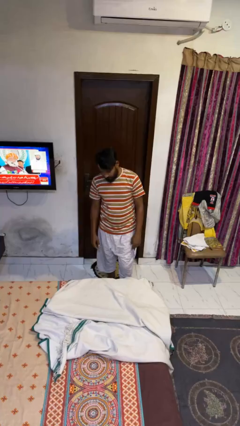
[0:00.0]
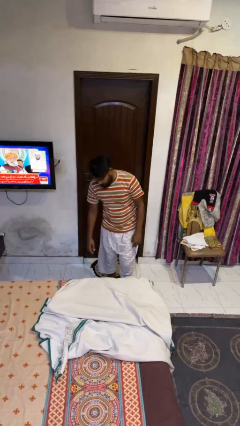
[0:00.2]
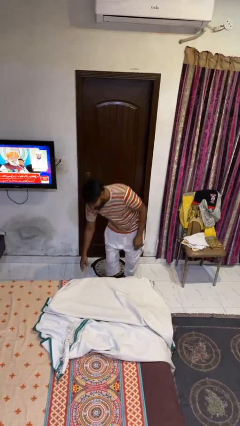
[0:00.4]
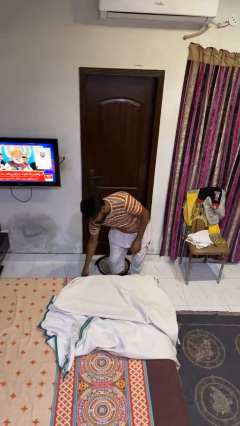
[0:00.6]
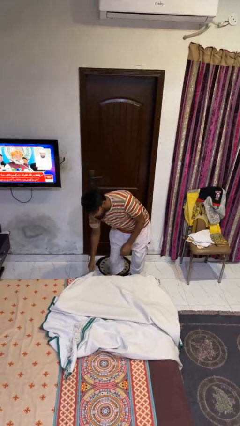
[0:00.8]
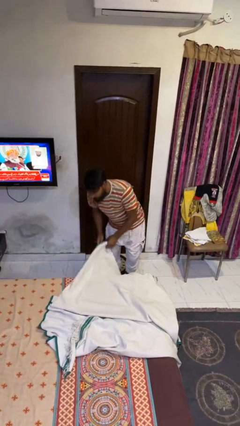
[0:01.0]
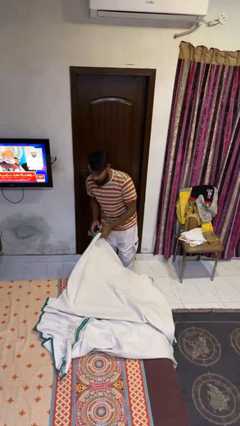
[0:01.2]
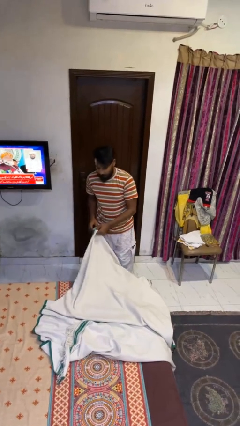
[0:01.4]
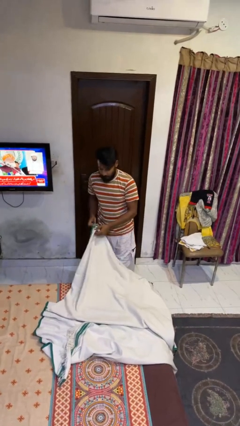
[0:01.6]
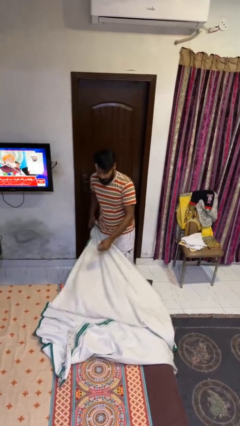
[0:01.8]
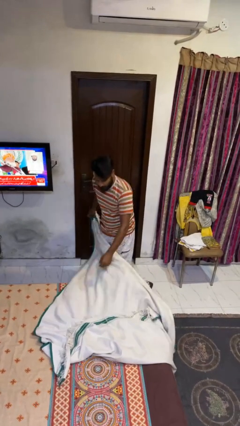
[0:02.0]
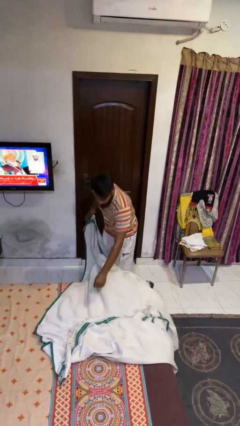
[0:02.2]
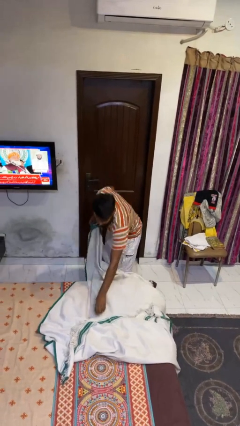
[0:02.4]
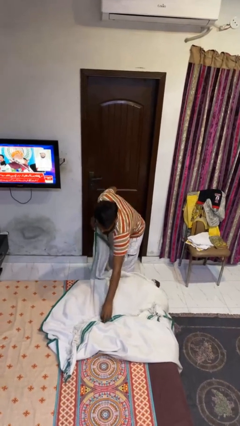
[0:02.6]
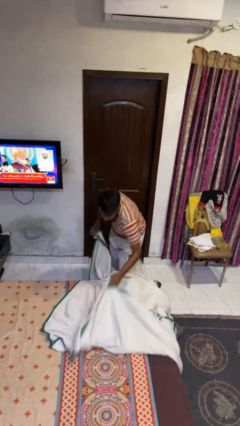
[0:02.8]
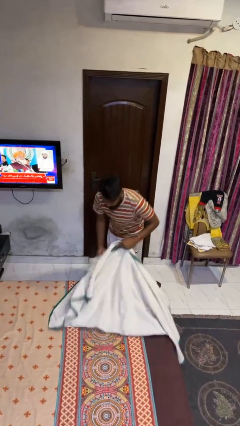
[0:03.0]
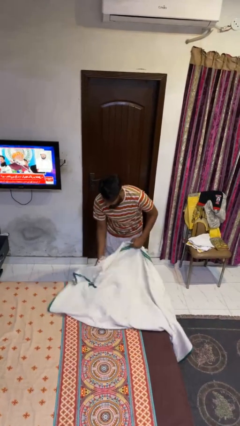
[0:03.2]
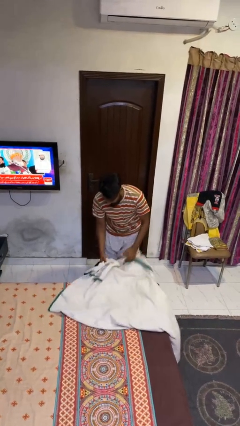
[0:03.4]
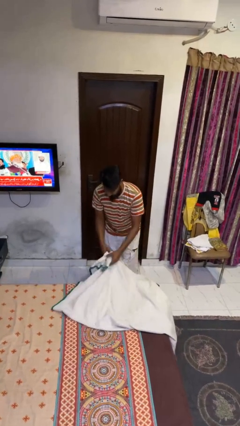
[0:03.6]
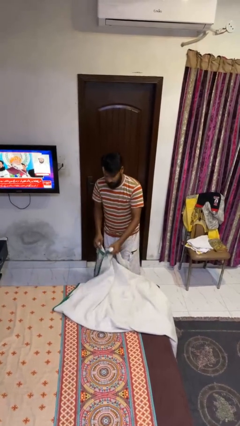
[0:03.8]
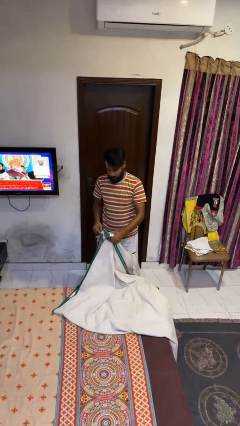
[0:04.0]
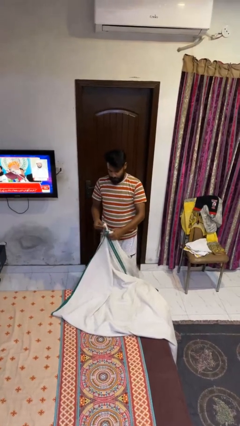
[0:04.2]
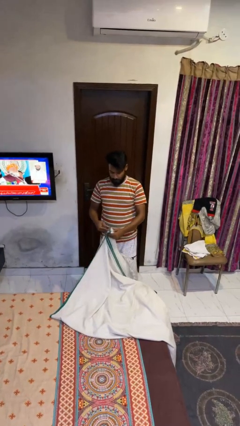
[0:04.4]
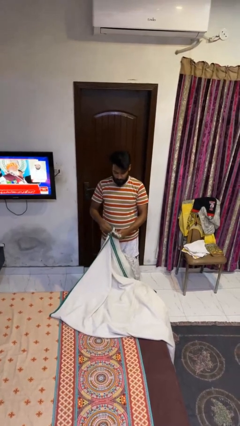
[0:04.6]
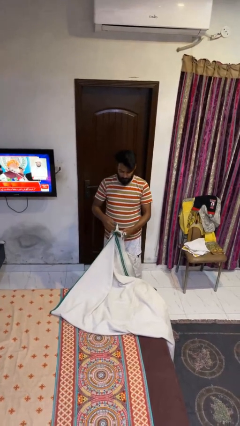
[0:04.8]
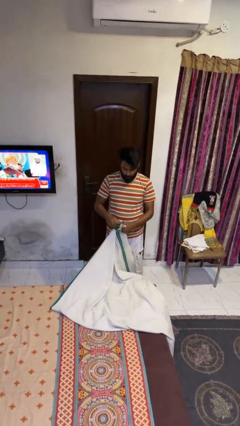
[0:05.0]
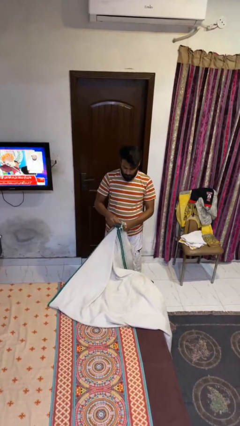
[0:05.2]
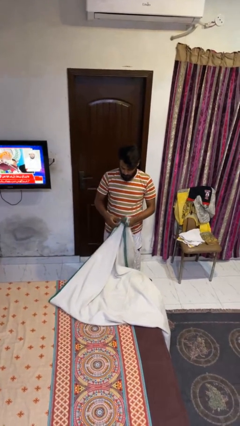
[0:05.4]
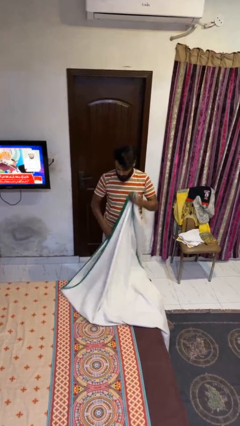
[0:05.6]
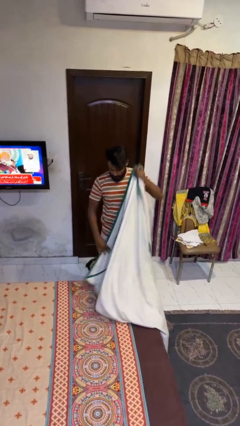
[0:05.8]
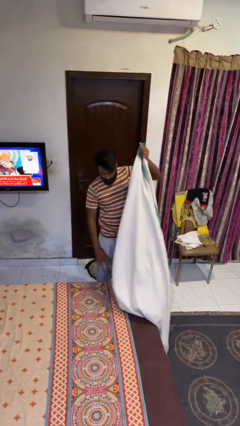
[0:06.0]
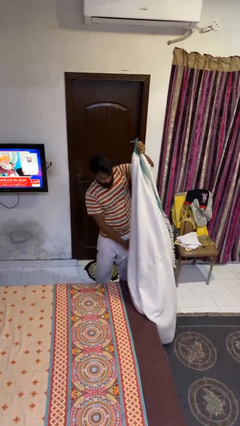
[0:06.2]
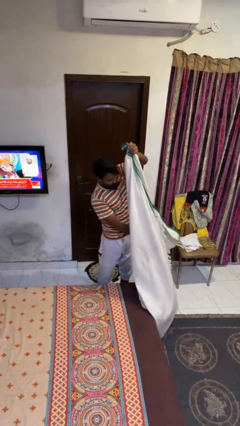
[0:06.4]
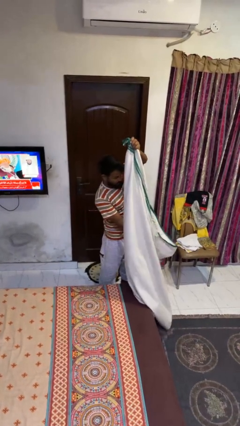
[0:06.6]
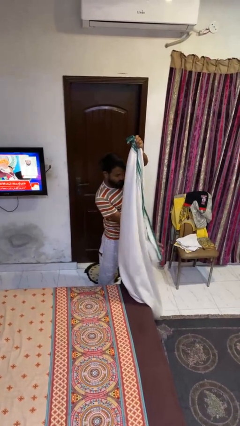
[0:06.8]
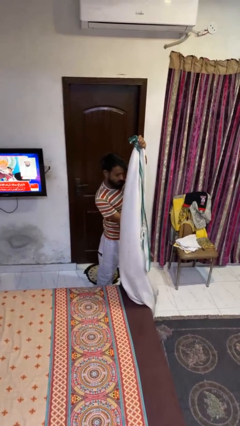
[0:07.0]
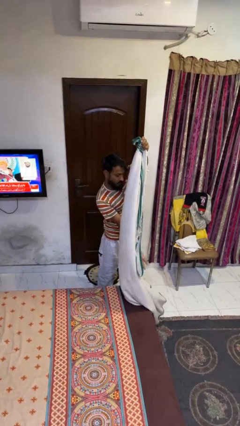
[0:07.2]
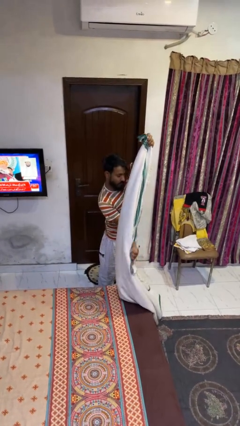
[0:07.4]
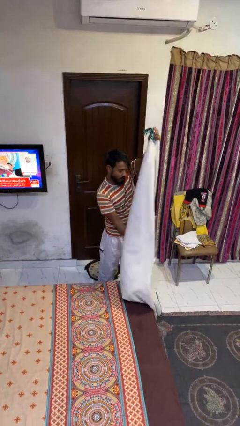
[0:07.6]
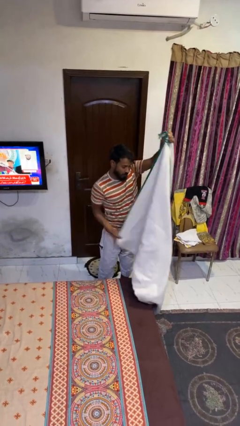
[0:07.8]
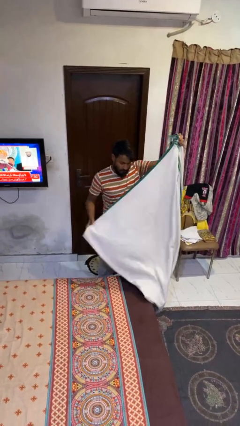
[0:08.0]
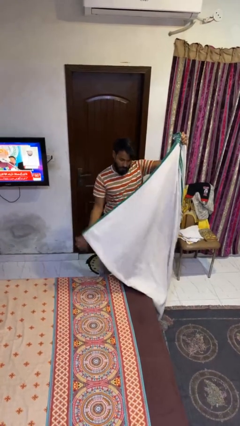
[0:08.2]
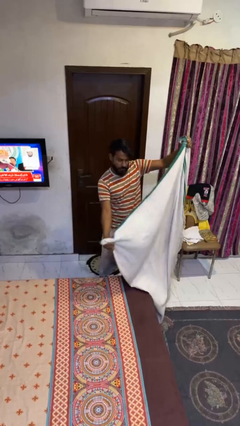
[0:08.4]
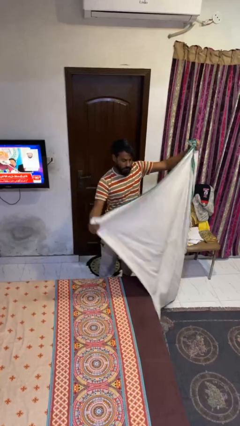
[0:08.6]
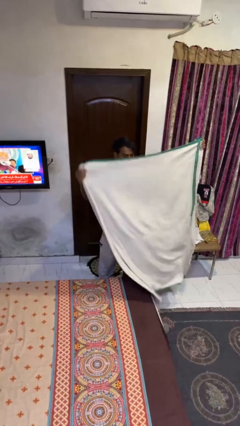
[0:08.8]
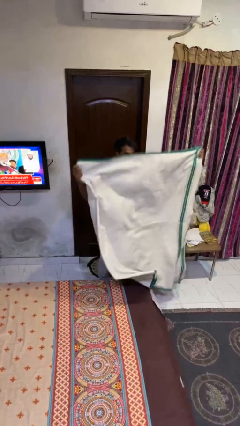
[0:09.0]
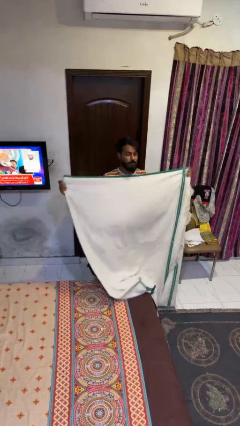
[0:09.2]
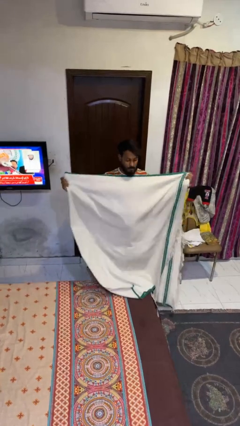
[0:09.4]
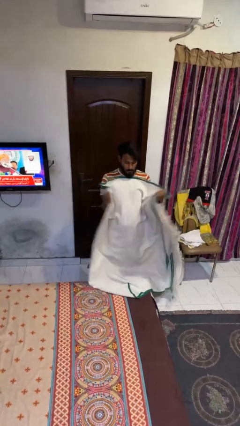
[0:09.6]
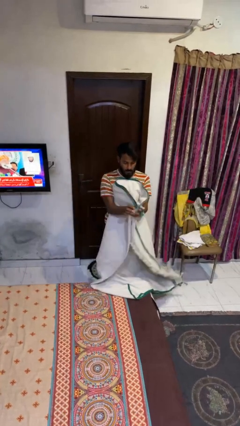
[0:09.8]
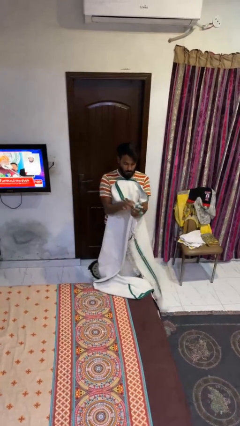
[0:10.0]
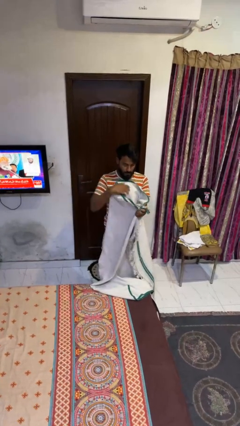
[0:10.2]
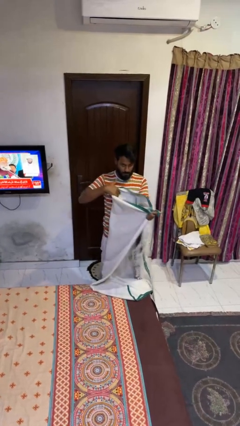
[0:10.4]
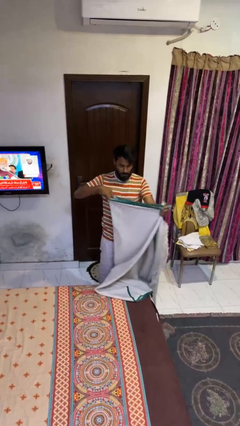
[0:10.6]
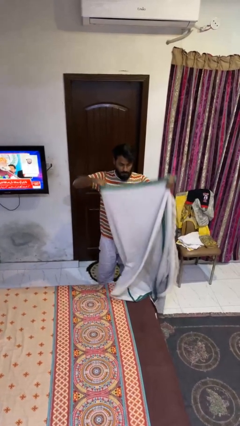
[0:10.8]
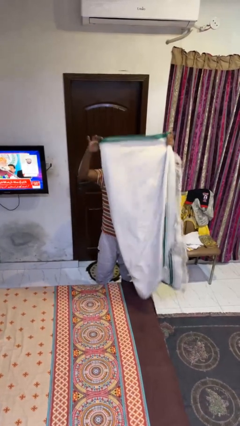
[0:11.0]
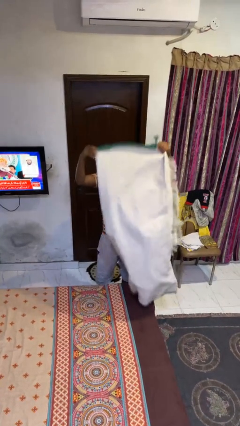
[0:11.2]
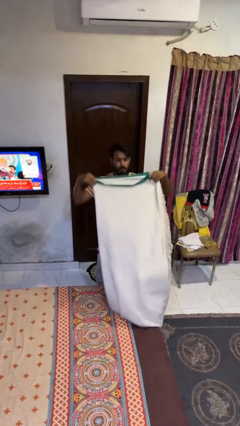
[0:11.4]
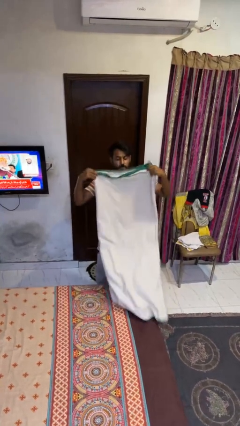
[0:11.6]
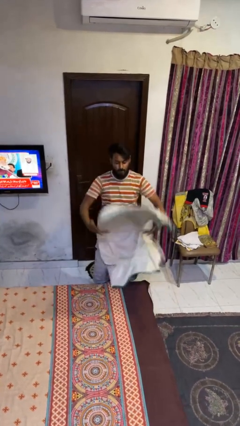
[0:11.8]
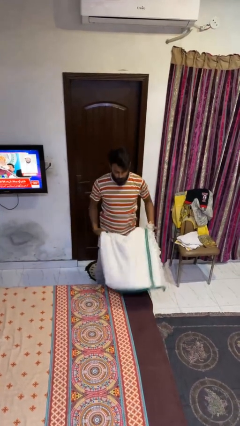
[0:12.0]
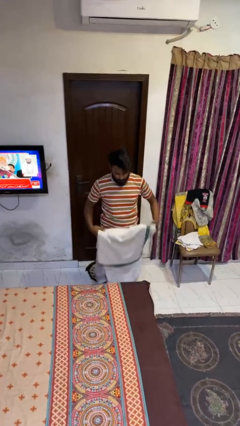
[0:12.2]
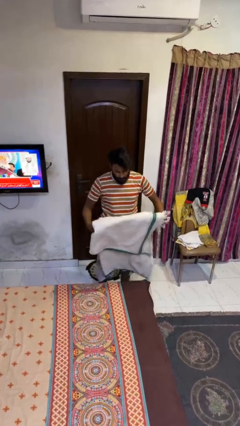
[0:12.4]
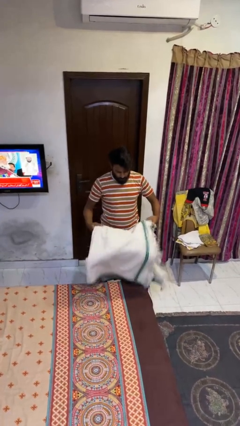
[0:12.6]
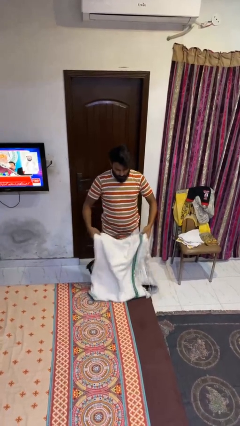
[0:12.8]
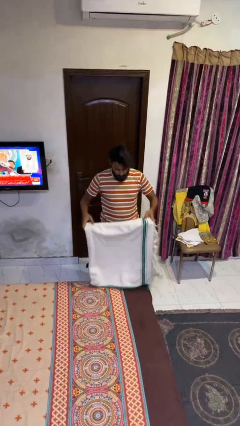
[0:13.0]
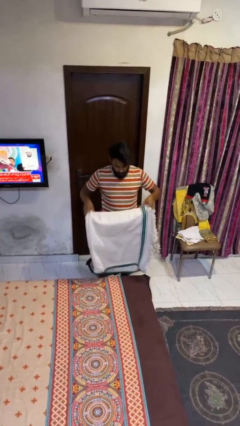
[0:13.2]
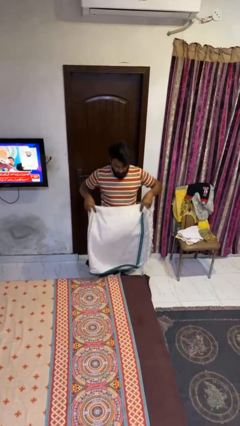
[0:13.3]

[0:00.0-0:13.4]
person folds blanket

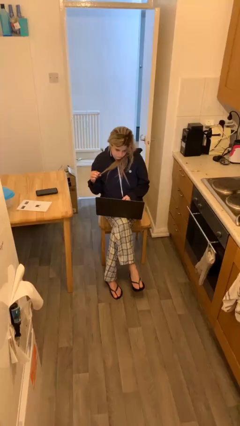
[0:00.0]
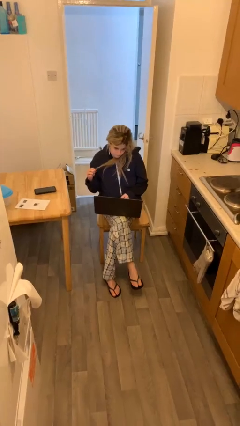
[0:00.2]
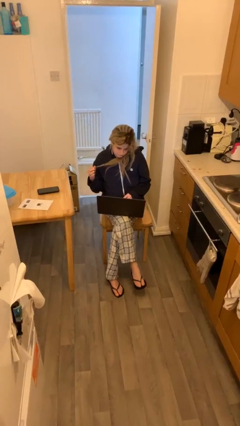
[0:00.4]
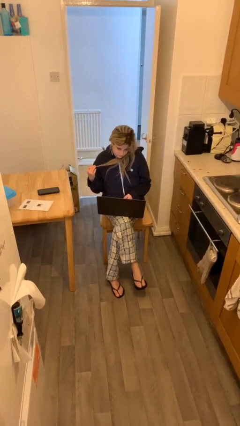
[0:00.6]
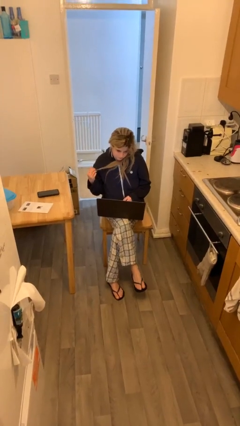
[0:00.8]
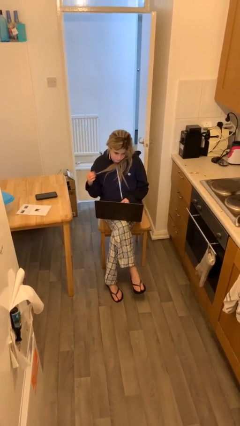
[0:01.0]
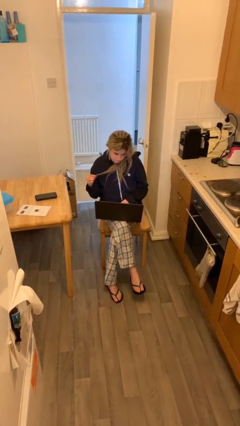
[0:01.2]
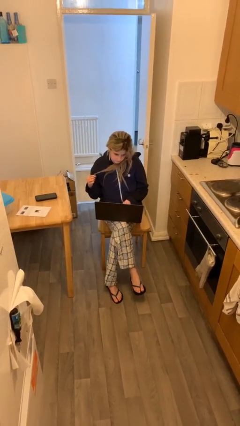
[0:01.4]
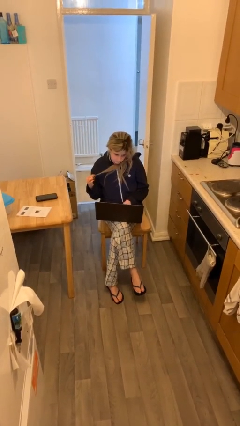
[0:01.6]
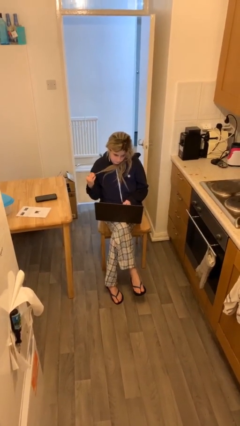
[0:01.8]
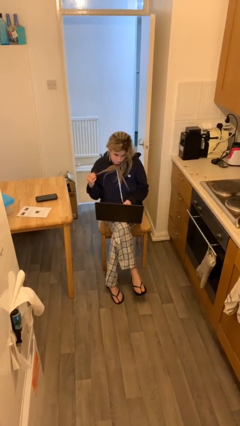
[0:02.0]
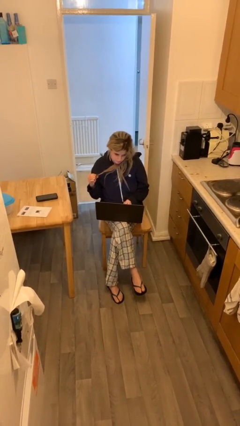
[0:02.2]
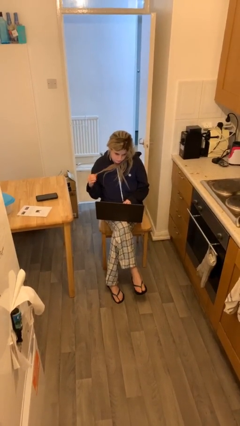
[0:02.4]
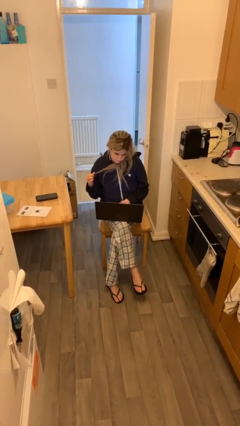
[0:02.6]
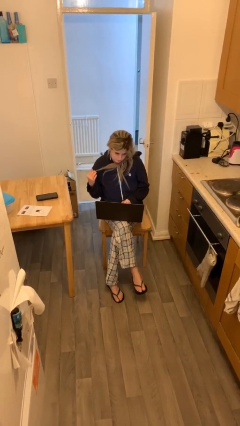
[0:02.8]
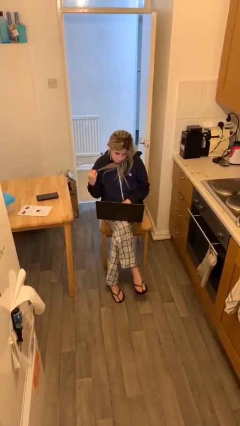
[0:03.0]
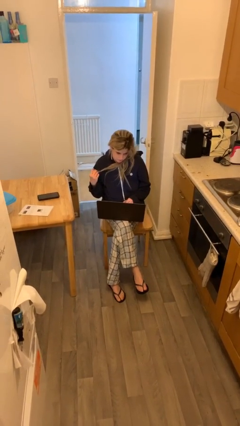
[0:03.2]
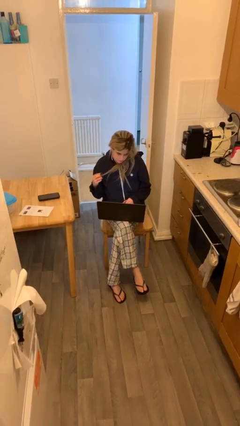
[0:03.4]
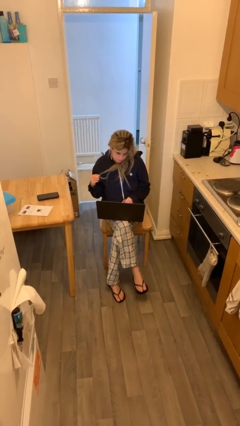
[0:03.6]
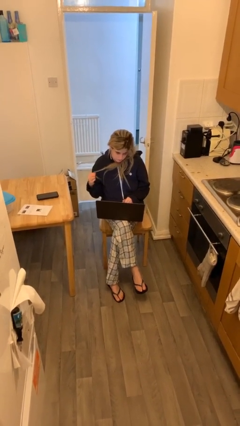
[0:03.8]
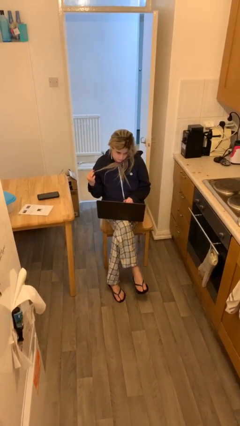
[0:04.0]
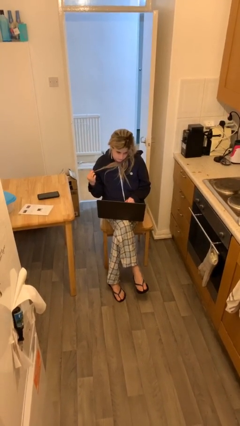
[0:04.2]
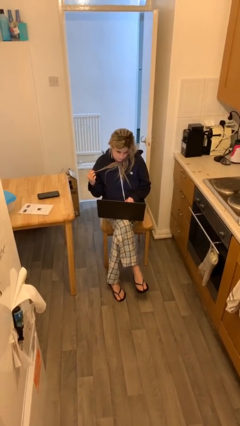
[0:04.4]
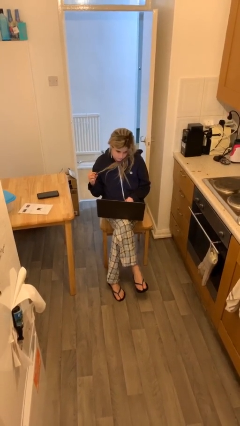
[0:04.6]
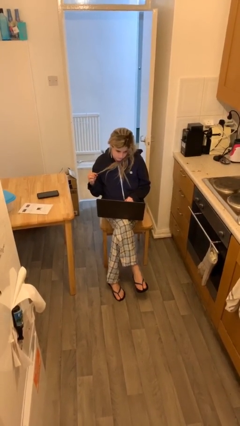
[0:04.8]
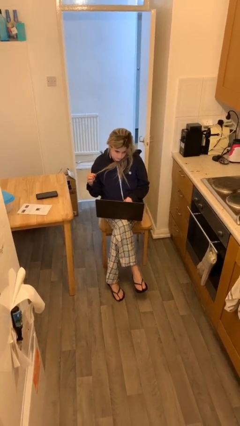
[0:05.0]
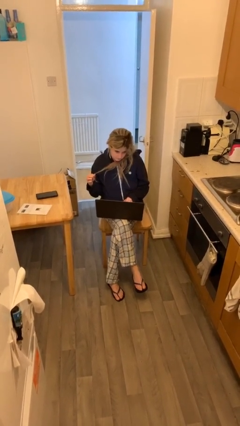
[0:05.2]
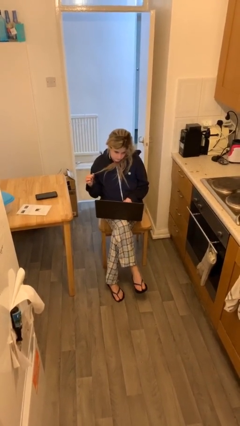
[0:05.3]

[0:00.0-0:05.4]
person interacts with laptop
